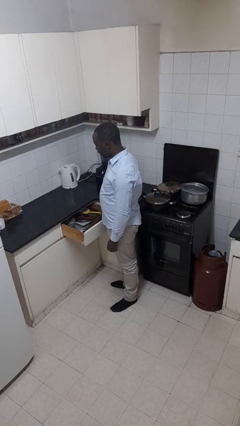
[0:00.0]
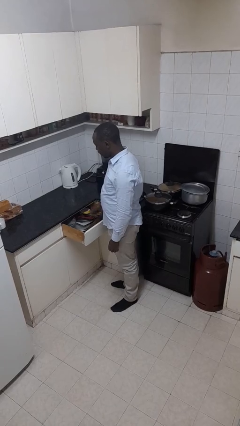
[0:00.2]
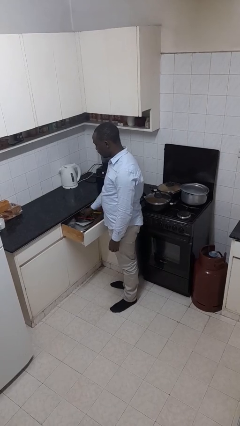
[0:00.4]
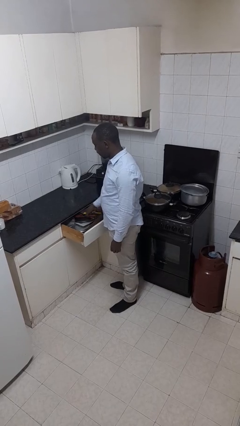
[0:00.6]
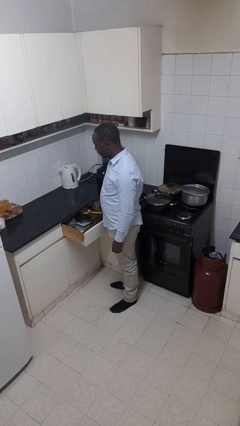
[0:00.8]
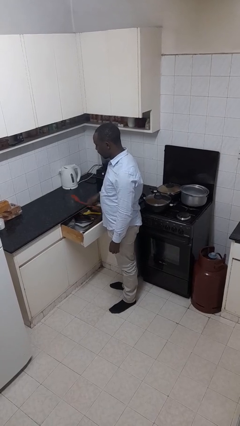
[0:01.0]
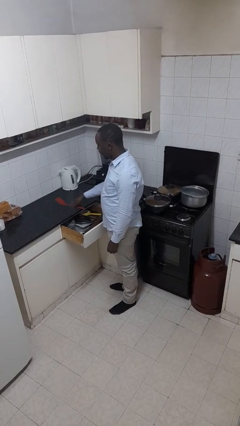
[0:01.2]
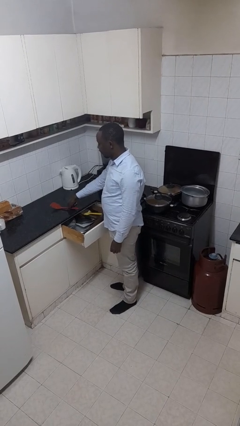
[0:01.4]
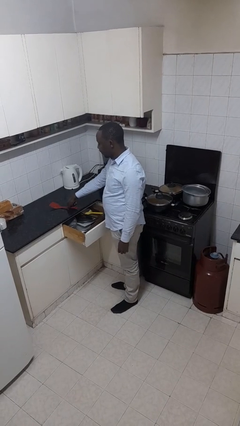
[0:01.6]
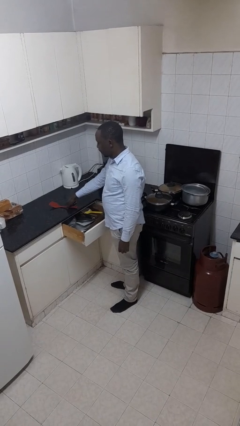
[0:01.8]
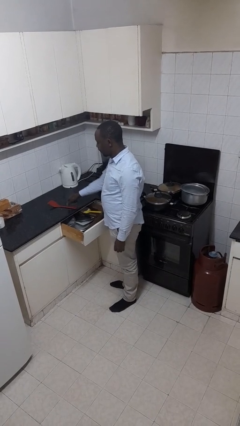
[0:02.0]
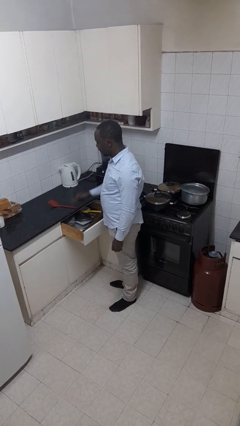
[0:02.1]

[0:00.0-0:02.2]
person takes object from kitchen drawer

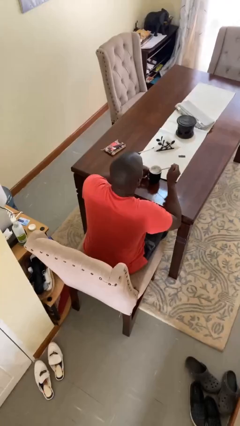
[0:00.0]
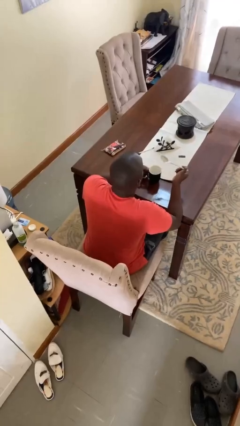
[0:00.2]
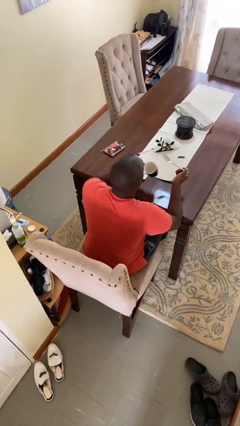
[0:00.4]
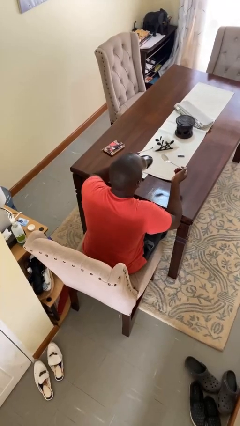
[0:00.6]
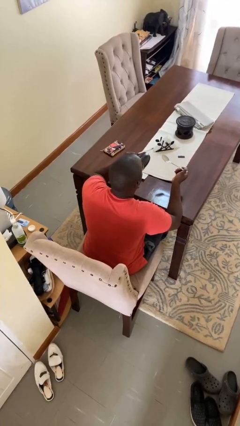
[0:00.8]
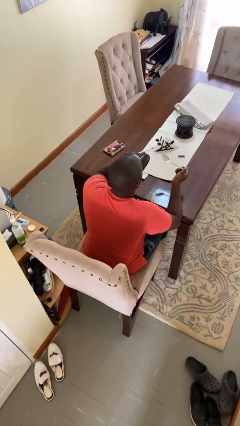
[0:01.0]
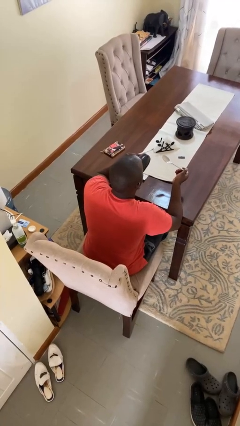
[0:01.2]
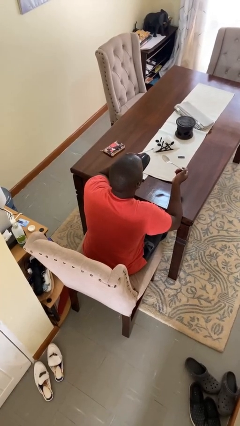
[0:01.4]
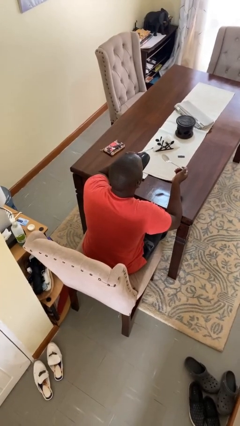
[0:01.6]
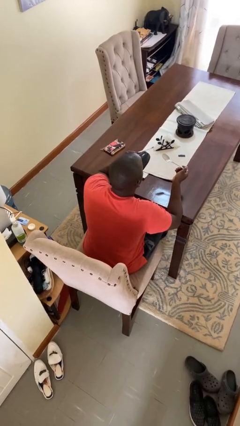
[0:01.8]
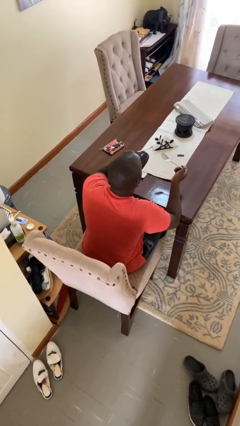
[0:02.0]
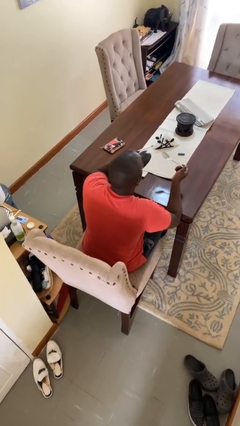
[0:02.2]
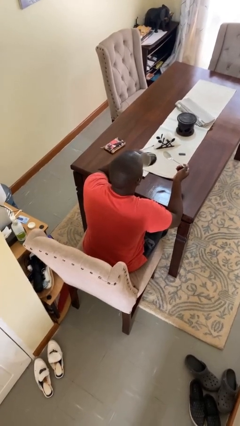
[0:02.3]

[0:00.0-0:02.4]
person drinks from mug

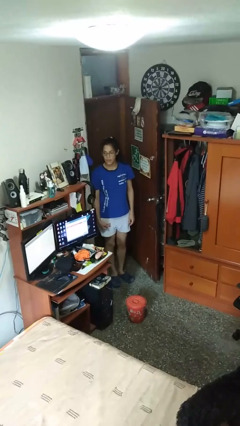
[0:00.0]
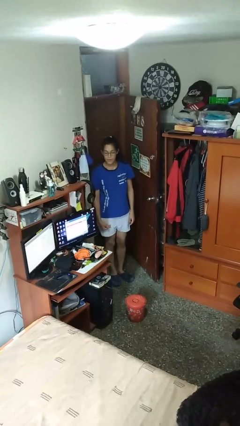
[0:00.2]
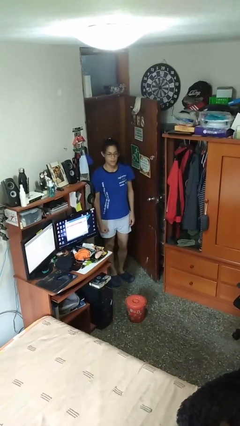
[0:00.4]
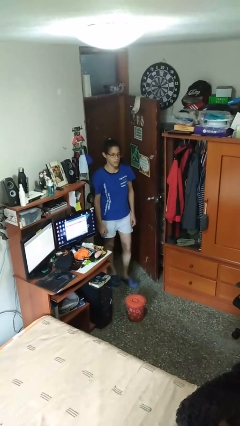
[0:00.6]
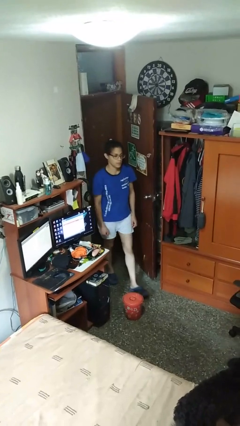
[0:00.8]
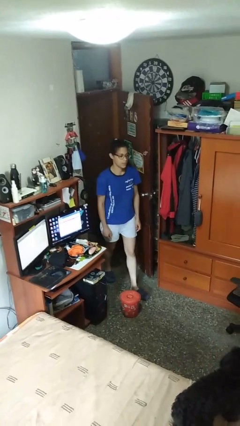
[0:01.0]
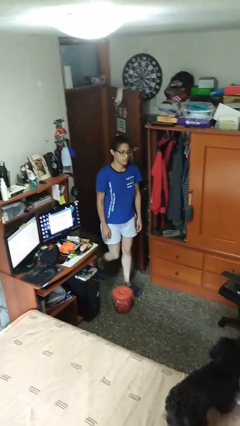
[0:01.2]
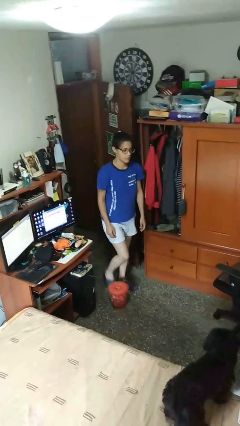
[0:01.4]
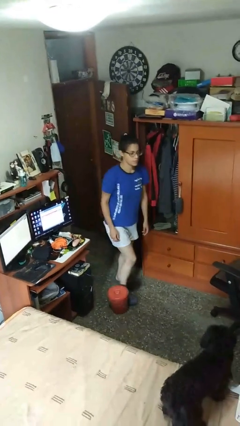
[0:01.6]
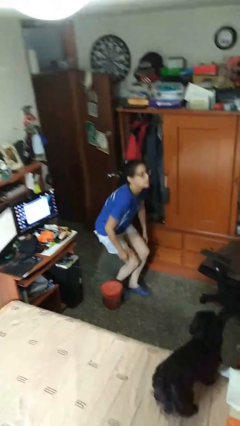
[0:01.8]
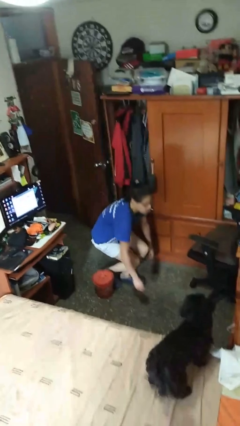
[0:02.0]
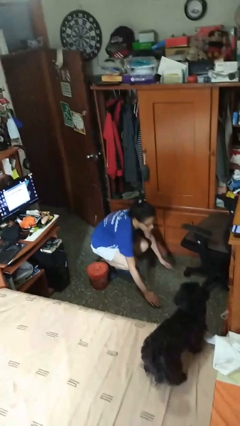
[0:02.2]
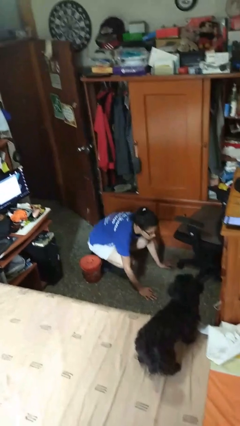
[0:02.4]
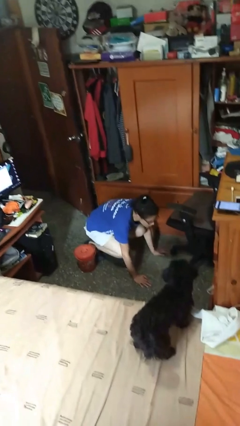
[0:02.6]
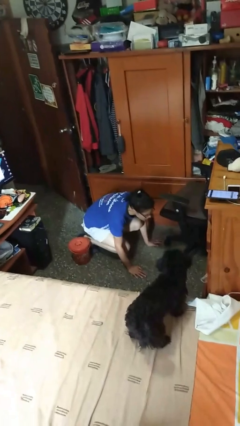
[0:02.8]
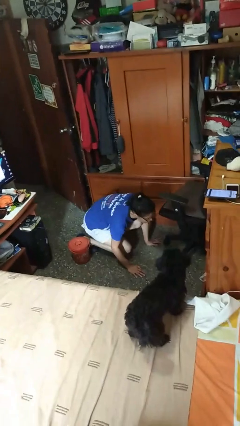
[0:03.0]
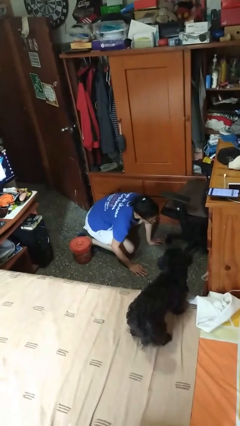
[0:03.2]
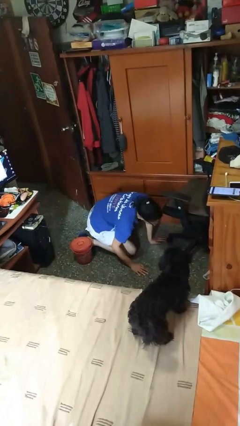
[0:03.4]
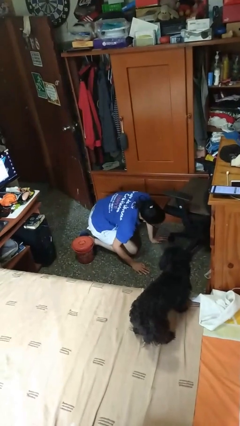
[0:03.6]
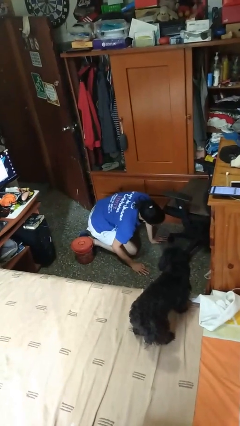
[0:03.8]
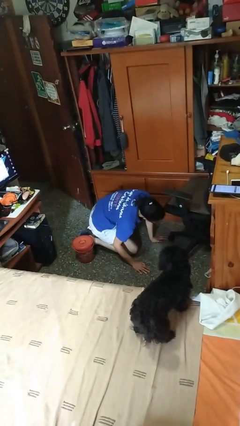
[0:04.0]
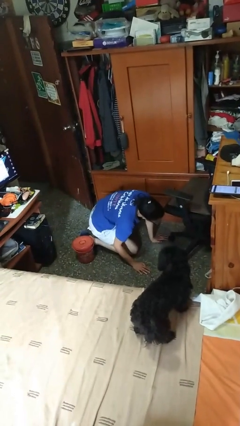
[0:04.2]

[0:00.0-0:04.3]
person trips on object on floor

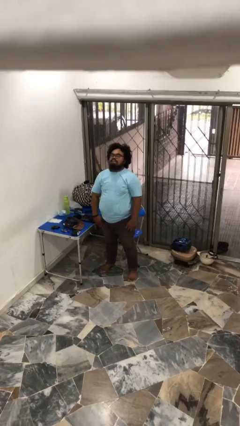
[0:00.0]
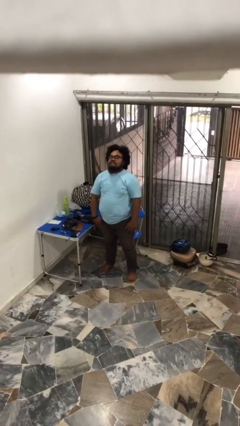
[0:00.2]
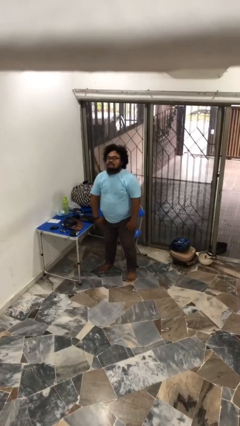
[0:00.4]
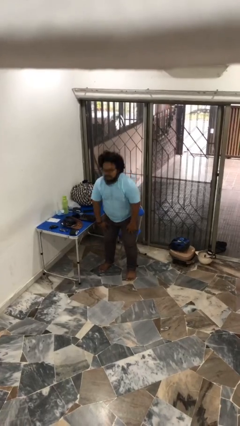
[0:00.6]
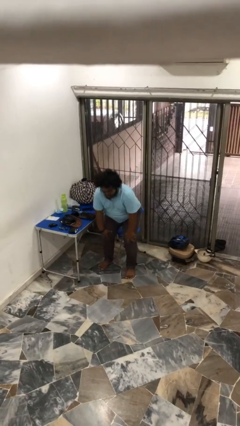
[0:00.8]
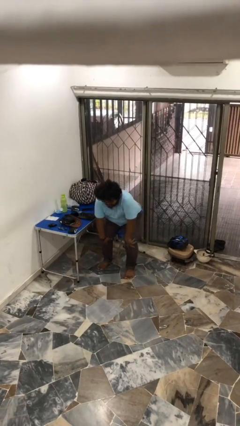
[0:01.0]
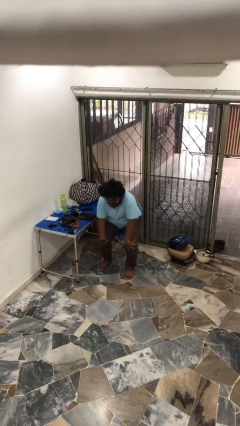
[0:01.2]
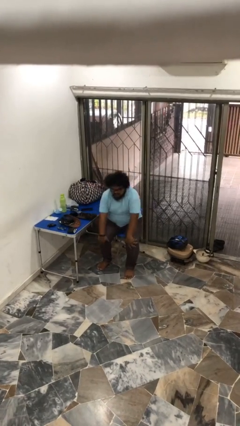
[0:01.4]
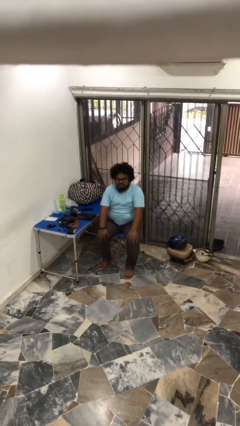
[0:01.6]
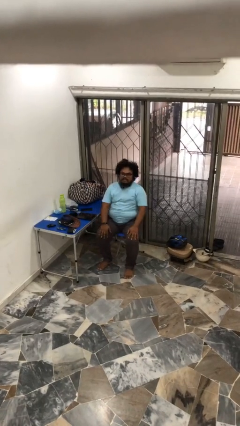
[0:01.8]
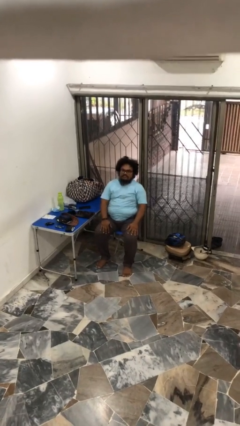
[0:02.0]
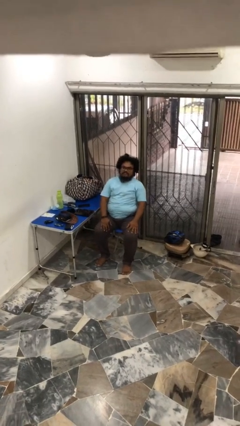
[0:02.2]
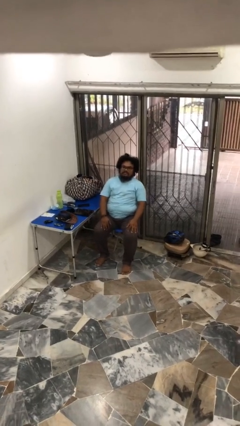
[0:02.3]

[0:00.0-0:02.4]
person sits down

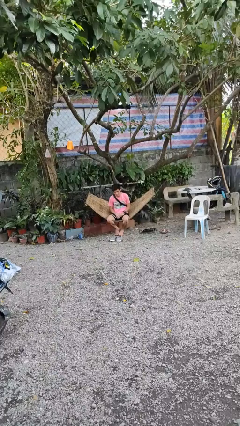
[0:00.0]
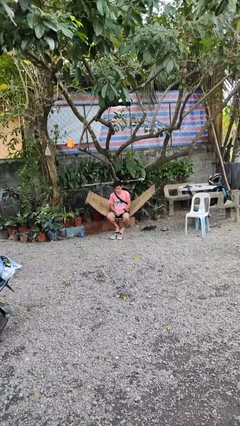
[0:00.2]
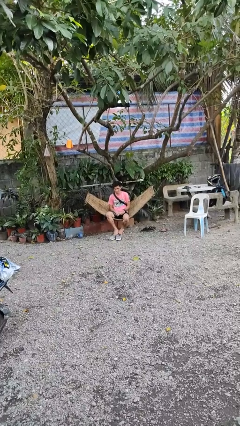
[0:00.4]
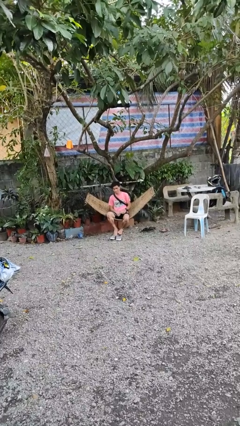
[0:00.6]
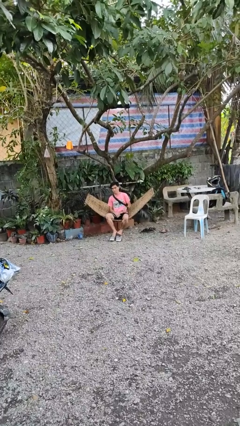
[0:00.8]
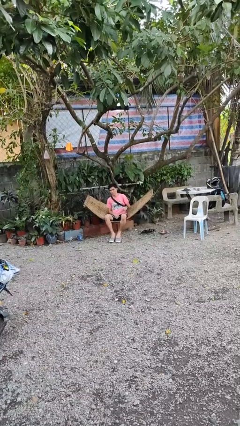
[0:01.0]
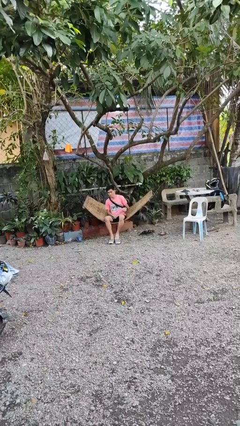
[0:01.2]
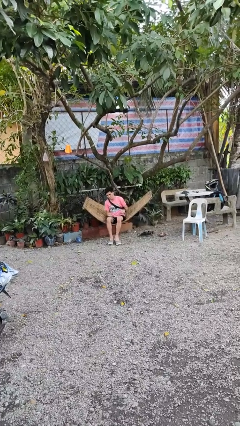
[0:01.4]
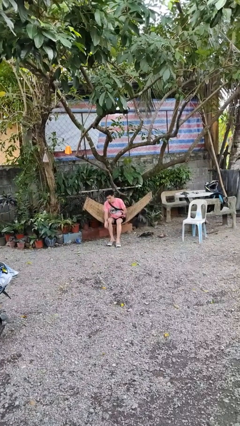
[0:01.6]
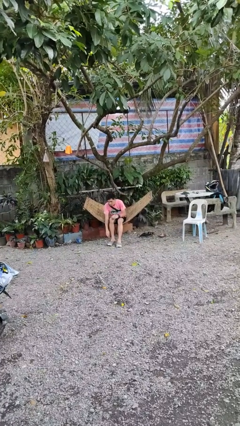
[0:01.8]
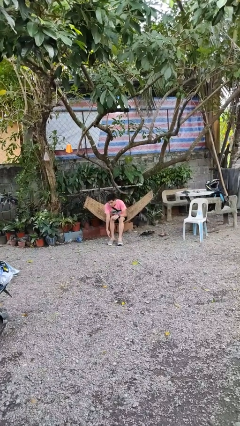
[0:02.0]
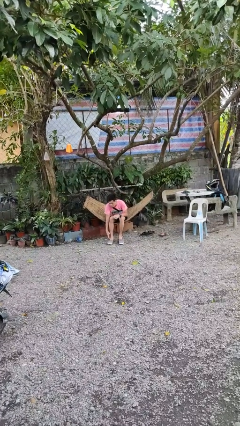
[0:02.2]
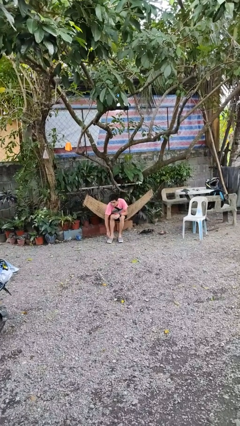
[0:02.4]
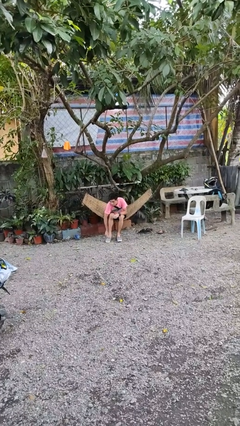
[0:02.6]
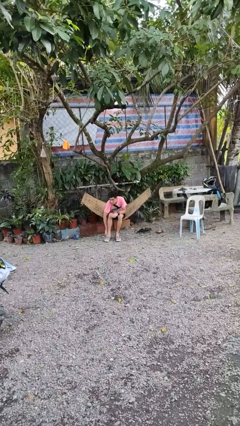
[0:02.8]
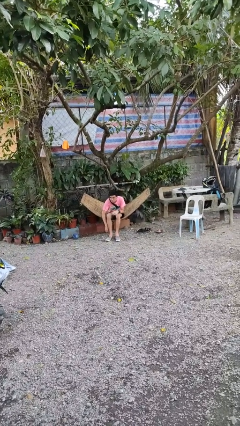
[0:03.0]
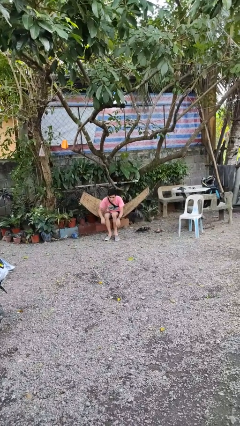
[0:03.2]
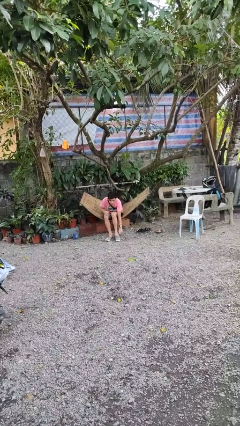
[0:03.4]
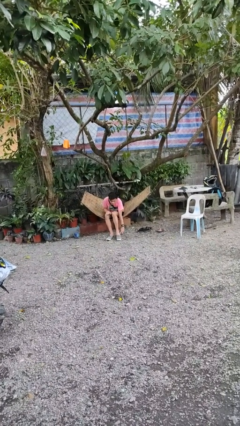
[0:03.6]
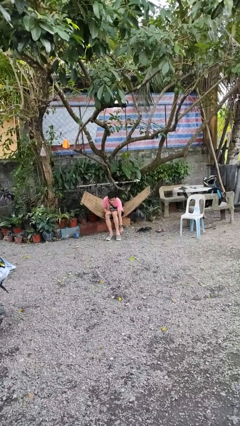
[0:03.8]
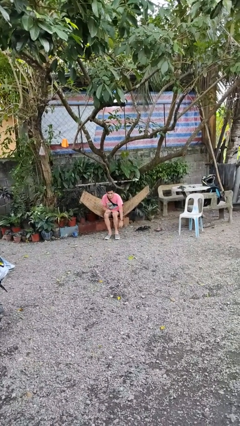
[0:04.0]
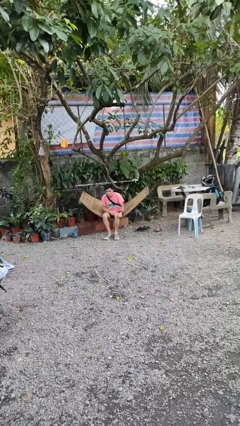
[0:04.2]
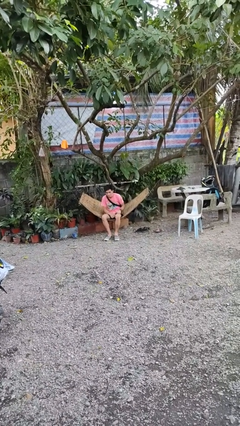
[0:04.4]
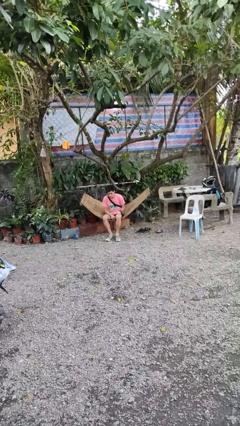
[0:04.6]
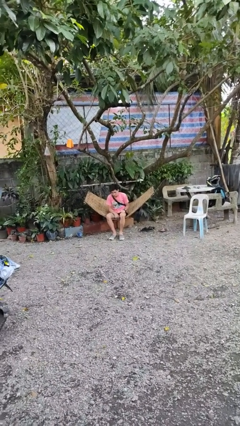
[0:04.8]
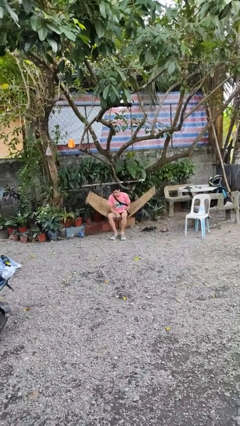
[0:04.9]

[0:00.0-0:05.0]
person puts on shoes

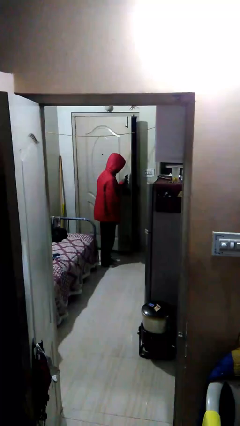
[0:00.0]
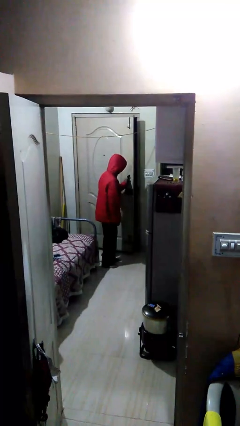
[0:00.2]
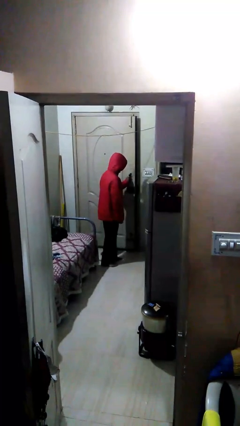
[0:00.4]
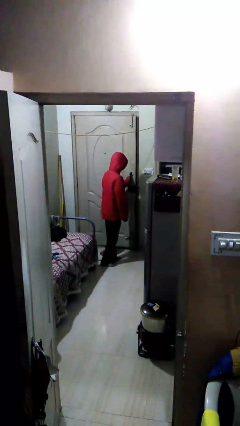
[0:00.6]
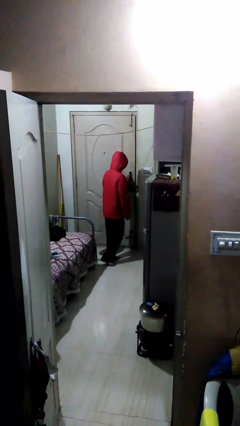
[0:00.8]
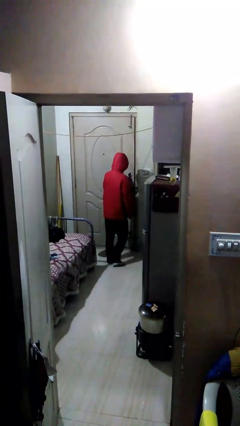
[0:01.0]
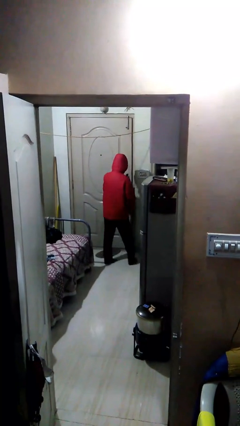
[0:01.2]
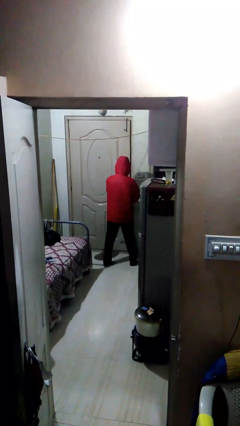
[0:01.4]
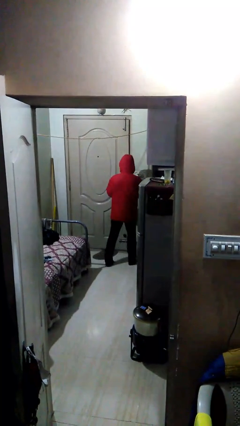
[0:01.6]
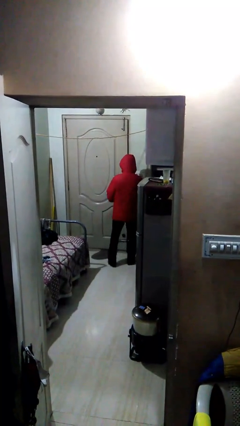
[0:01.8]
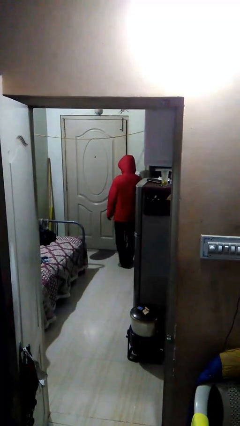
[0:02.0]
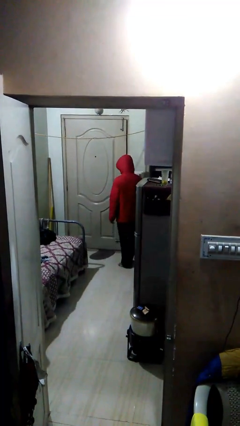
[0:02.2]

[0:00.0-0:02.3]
person closes facility door
